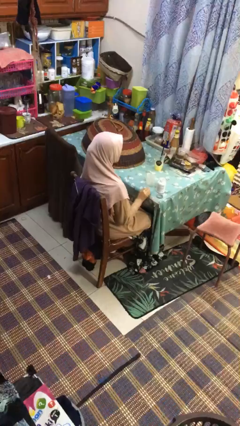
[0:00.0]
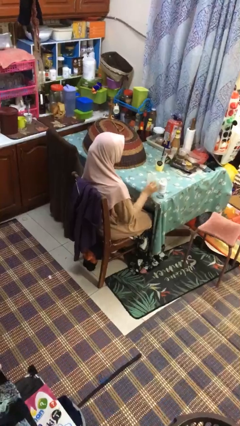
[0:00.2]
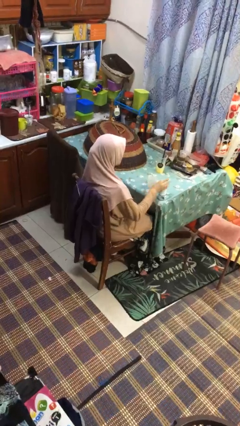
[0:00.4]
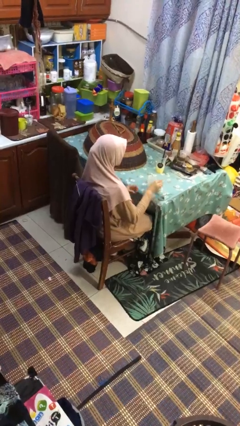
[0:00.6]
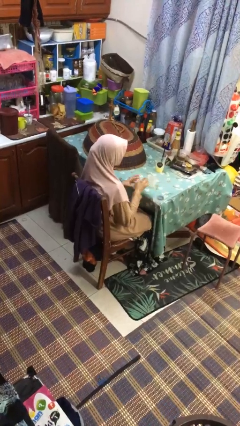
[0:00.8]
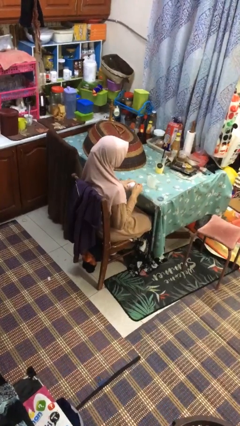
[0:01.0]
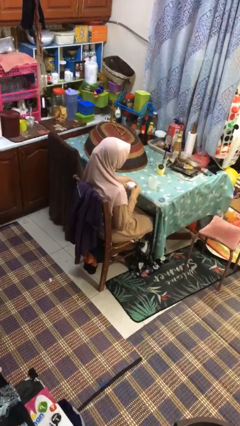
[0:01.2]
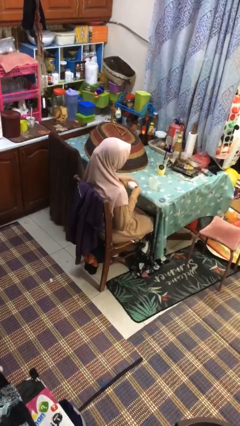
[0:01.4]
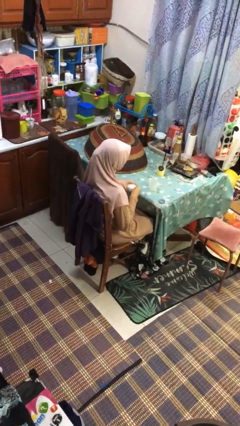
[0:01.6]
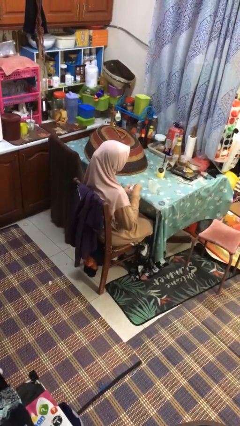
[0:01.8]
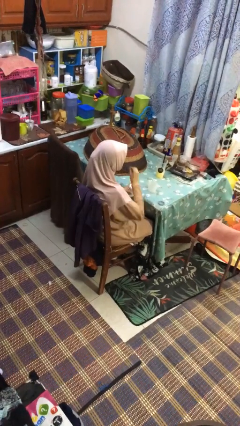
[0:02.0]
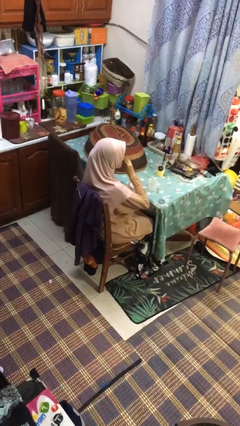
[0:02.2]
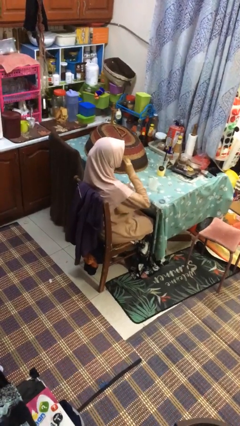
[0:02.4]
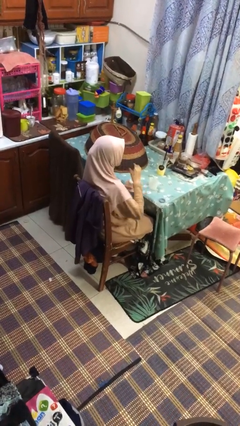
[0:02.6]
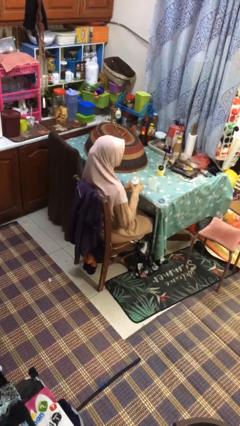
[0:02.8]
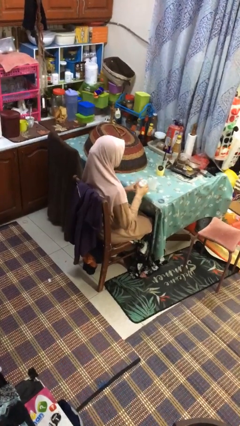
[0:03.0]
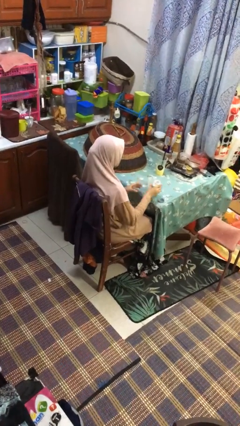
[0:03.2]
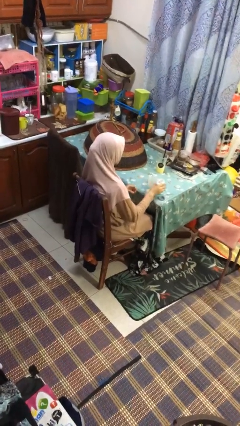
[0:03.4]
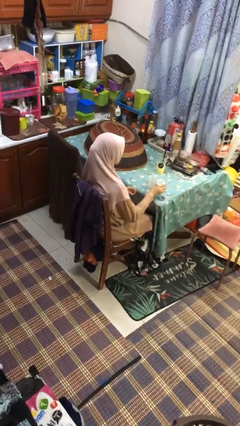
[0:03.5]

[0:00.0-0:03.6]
person takes medicine pills

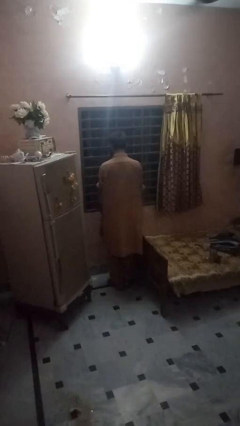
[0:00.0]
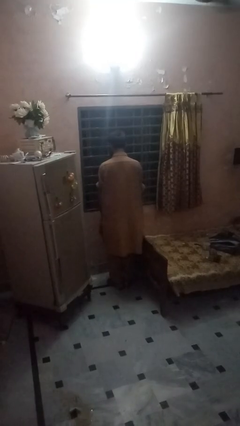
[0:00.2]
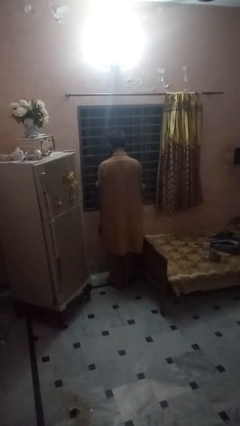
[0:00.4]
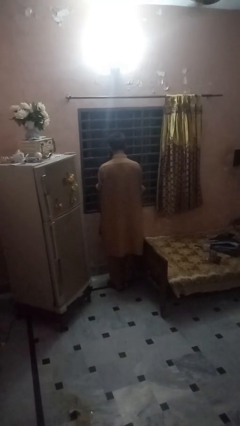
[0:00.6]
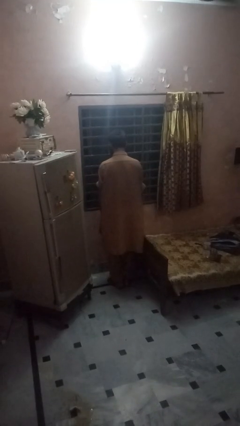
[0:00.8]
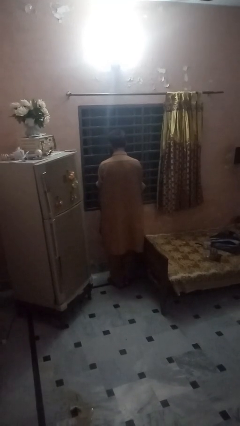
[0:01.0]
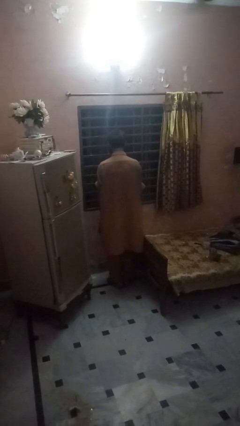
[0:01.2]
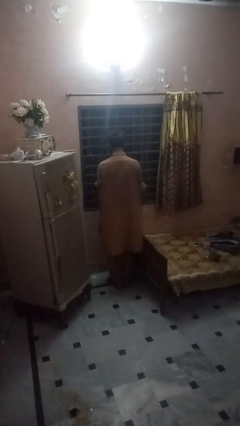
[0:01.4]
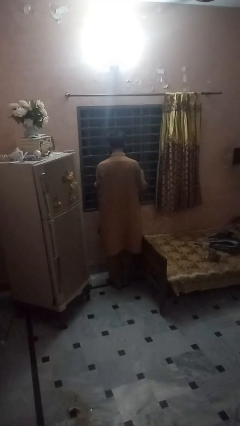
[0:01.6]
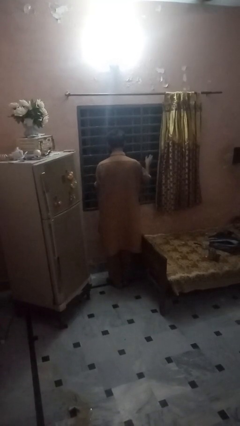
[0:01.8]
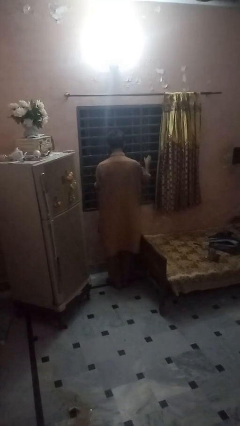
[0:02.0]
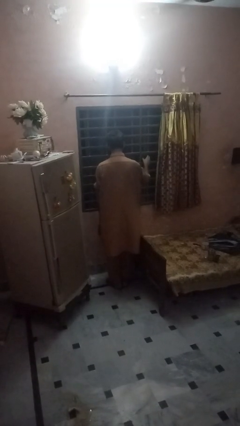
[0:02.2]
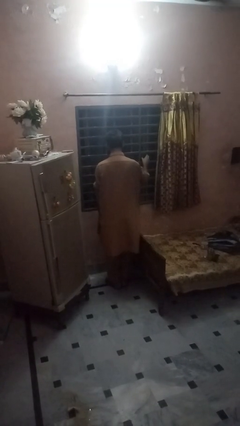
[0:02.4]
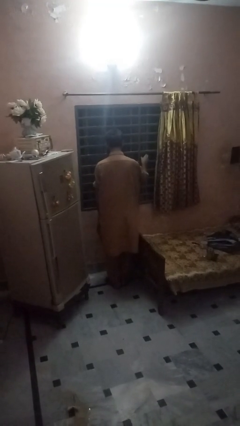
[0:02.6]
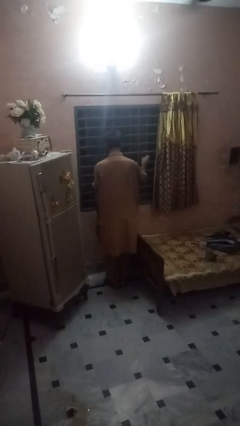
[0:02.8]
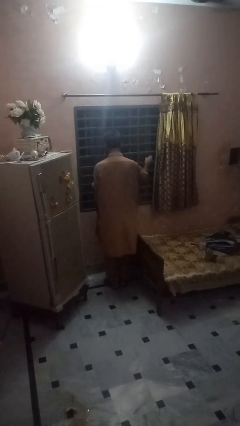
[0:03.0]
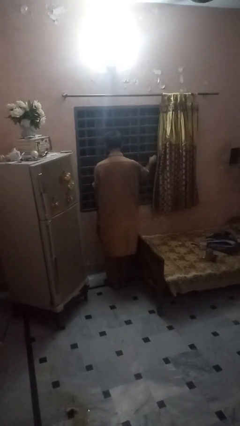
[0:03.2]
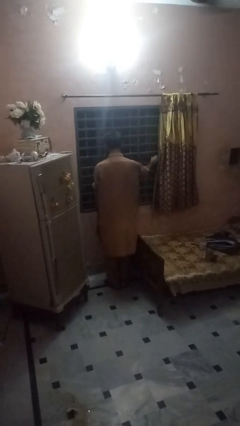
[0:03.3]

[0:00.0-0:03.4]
person opens home window

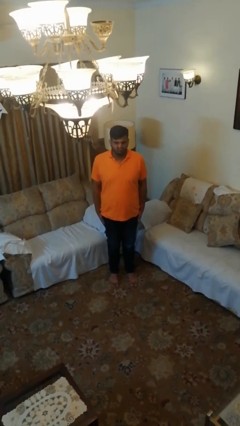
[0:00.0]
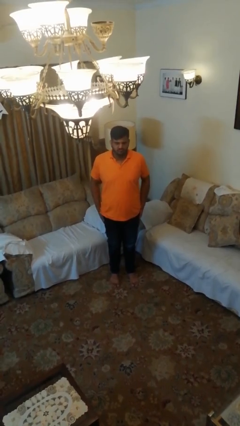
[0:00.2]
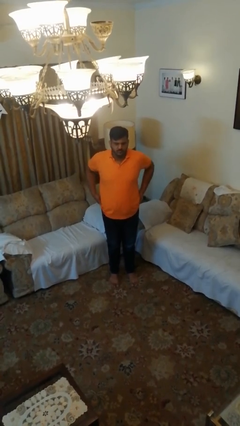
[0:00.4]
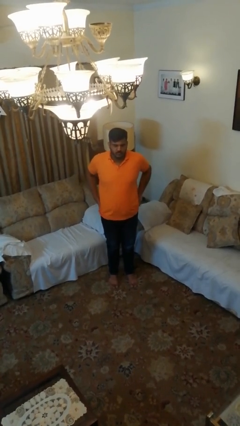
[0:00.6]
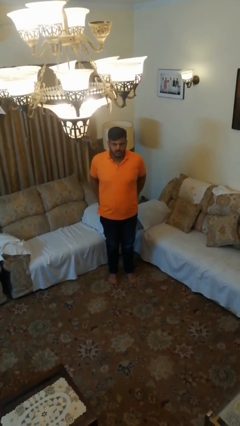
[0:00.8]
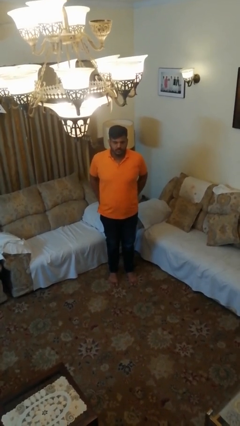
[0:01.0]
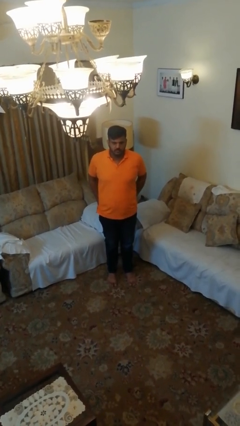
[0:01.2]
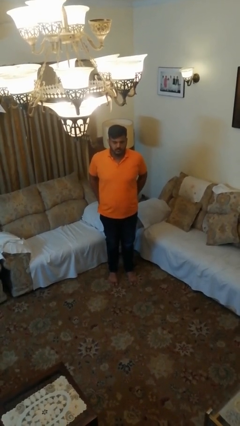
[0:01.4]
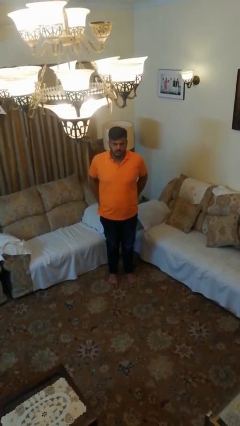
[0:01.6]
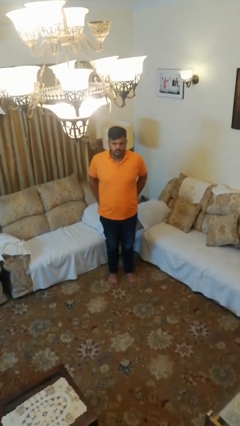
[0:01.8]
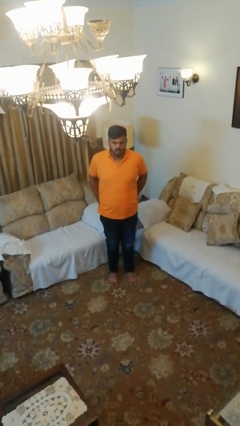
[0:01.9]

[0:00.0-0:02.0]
person puts hands in back pockets

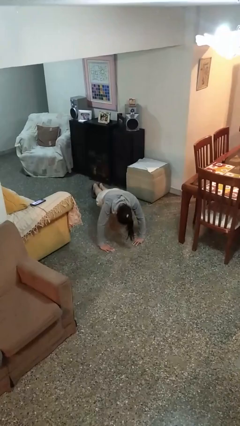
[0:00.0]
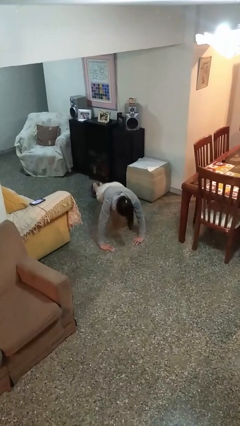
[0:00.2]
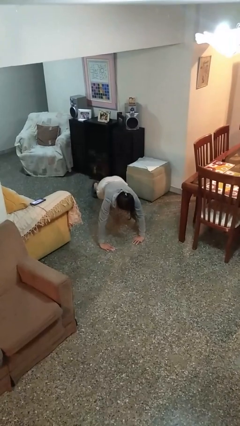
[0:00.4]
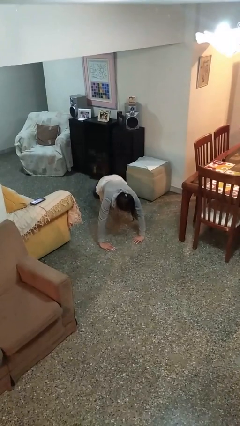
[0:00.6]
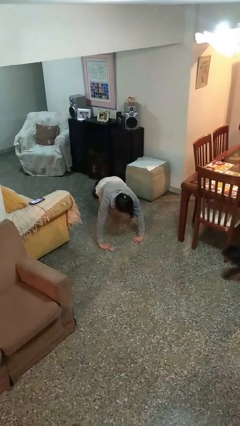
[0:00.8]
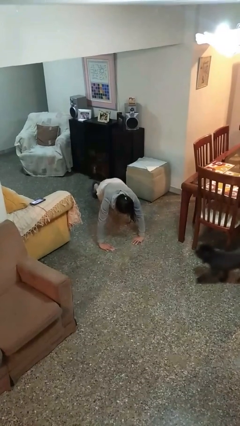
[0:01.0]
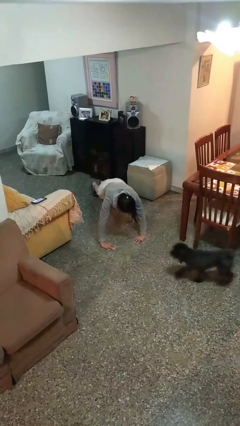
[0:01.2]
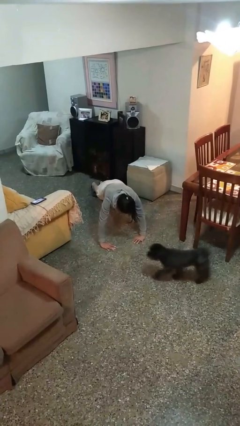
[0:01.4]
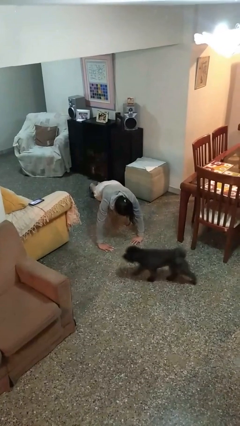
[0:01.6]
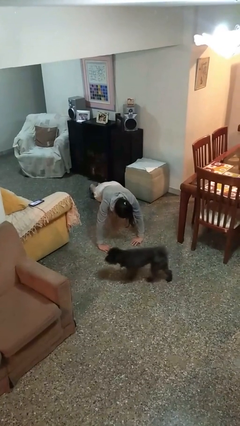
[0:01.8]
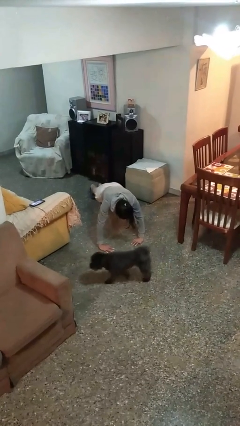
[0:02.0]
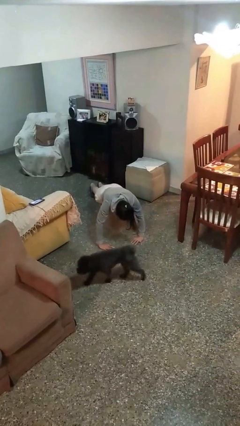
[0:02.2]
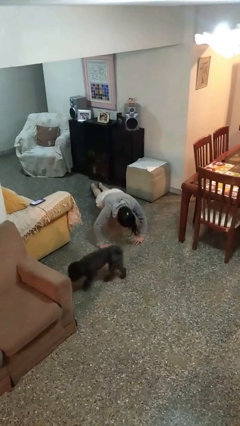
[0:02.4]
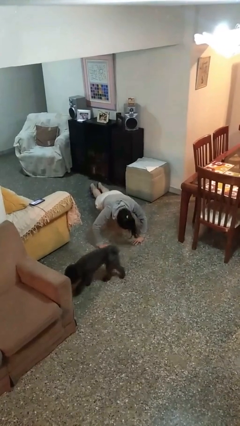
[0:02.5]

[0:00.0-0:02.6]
person exercises with pushup

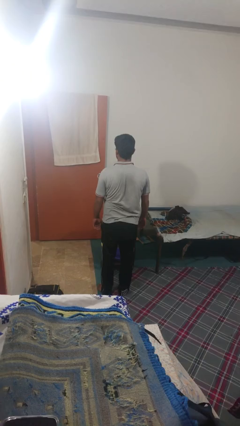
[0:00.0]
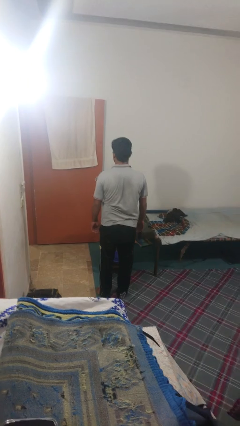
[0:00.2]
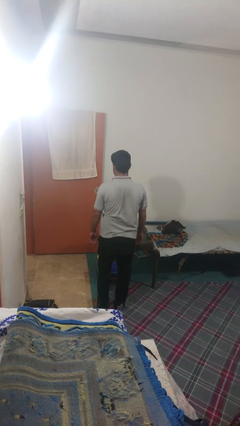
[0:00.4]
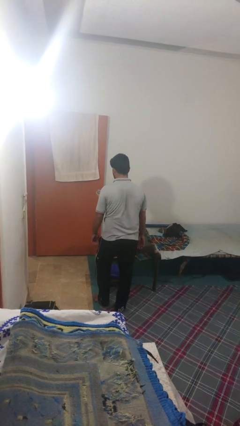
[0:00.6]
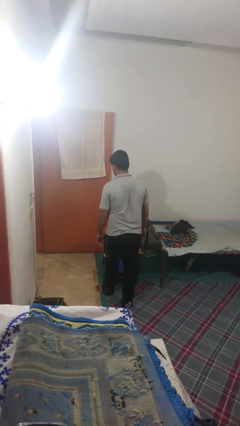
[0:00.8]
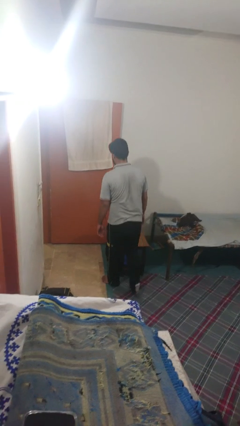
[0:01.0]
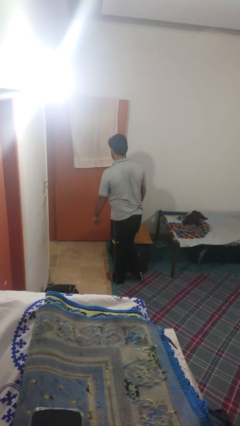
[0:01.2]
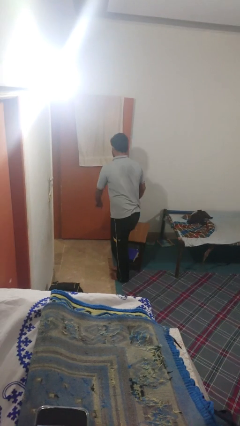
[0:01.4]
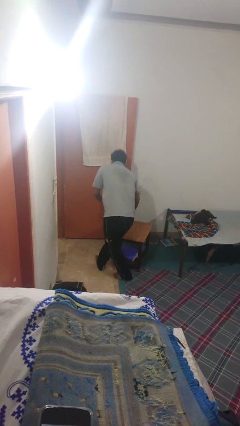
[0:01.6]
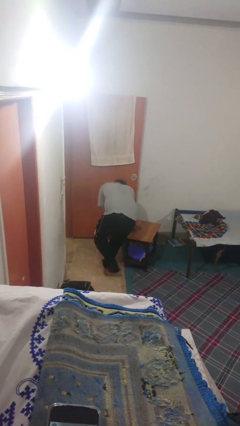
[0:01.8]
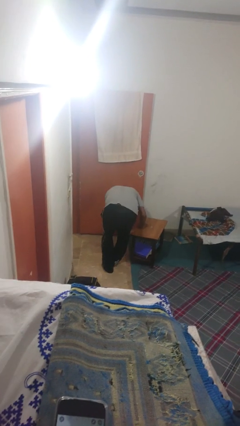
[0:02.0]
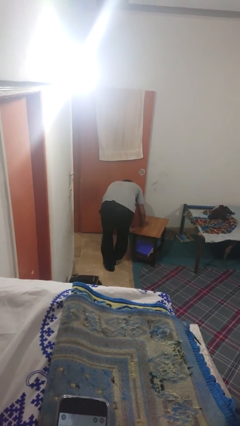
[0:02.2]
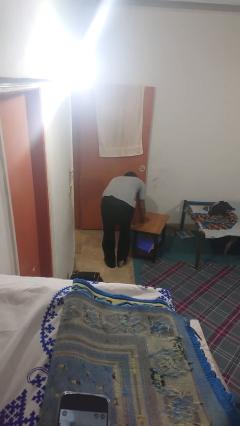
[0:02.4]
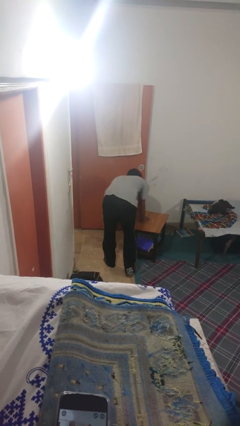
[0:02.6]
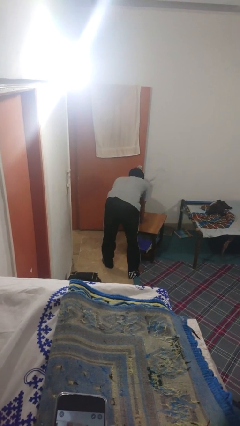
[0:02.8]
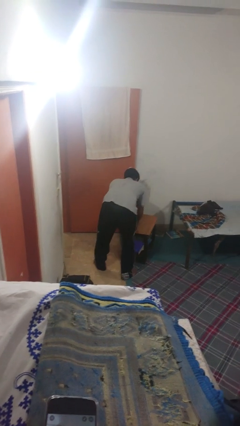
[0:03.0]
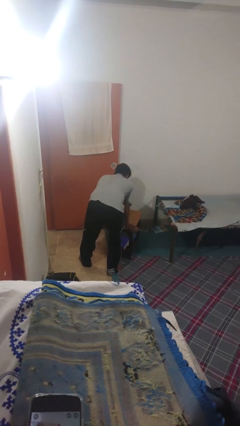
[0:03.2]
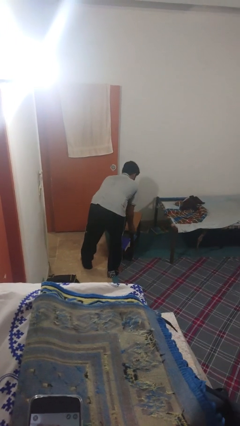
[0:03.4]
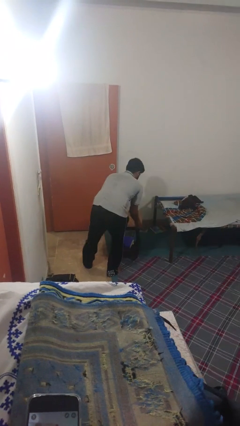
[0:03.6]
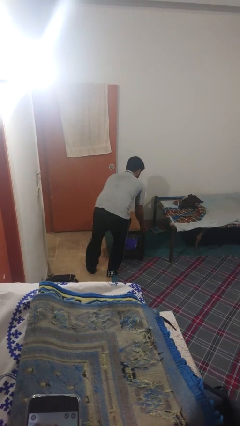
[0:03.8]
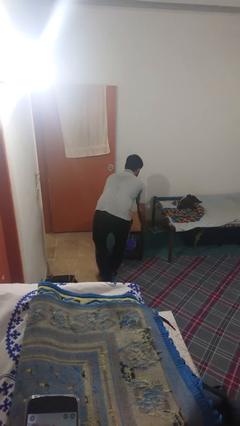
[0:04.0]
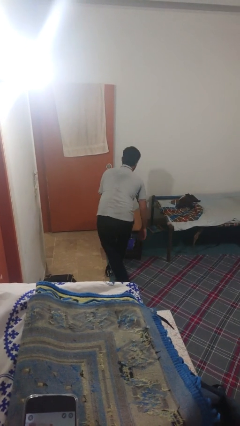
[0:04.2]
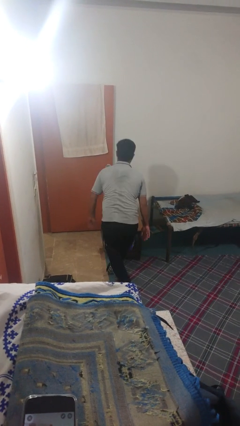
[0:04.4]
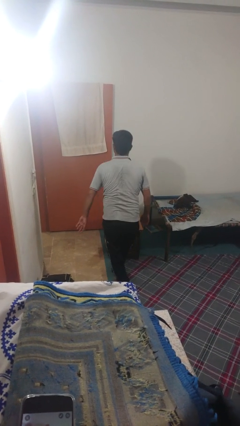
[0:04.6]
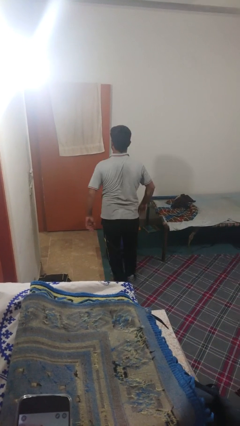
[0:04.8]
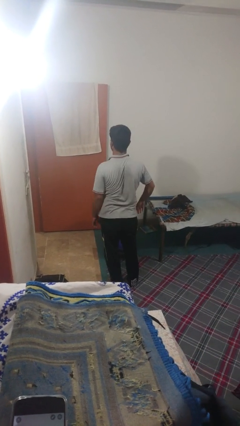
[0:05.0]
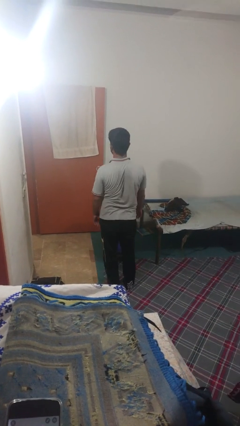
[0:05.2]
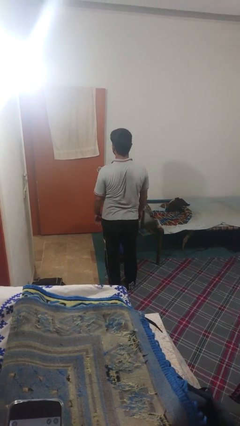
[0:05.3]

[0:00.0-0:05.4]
person bumps into table

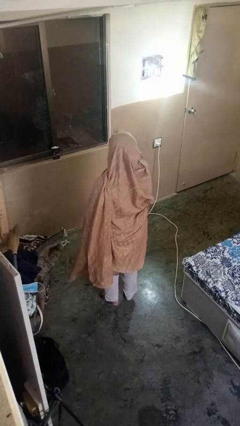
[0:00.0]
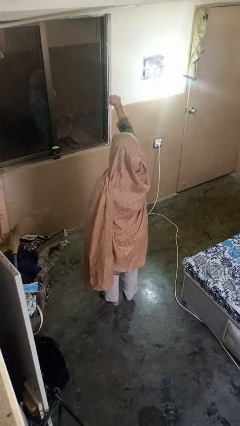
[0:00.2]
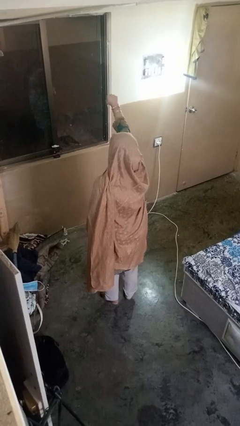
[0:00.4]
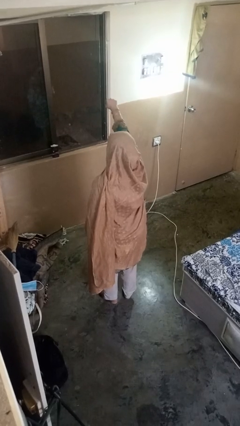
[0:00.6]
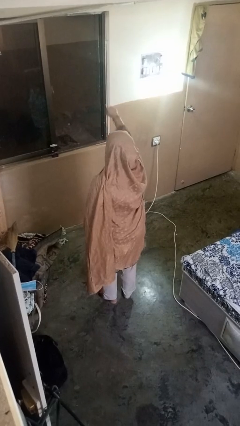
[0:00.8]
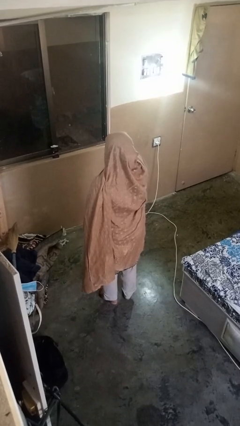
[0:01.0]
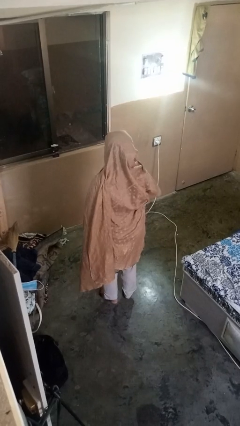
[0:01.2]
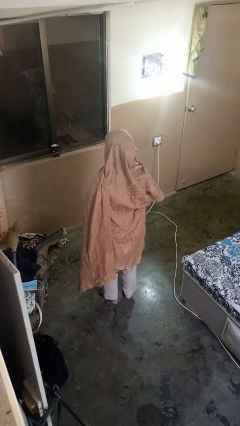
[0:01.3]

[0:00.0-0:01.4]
person punches
